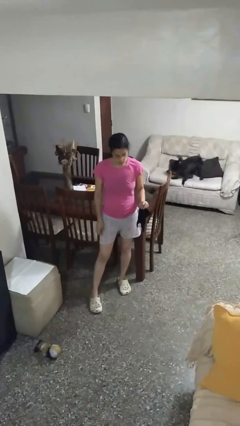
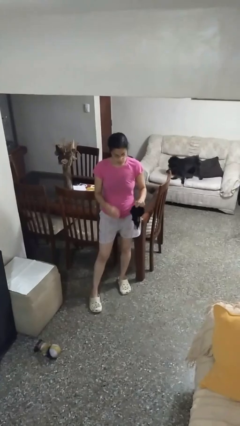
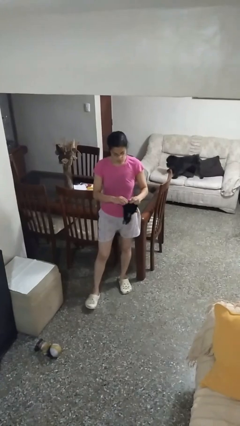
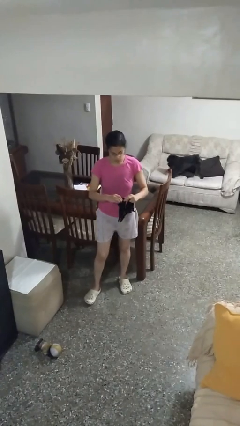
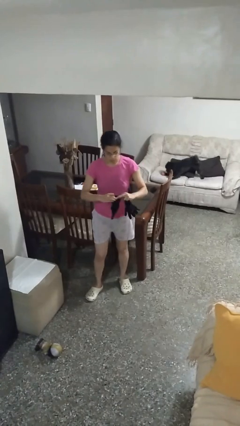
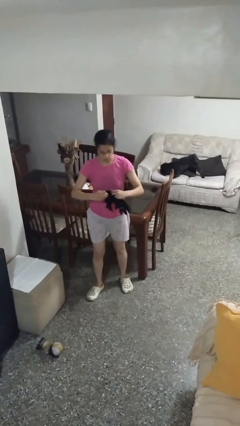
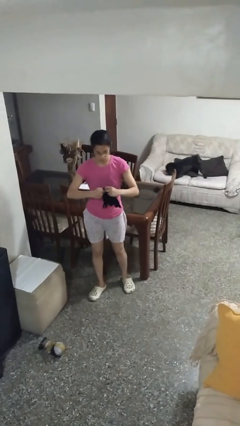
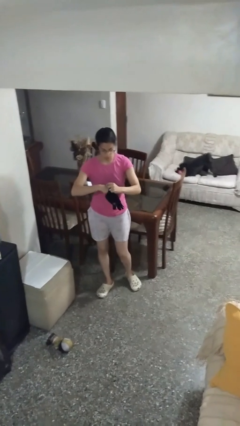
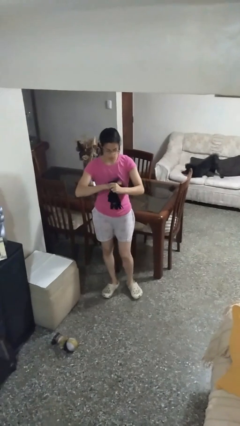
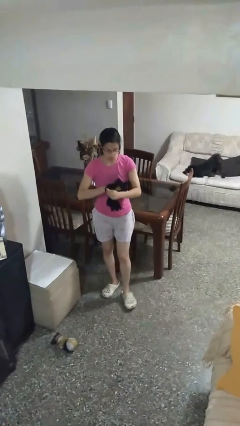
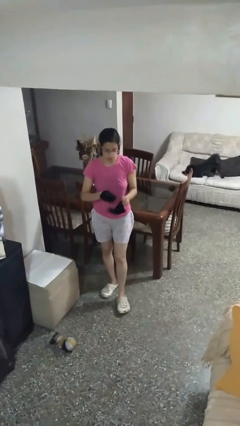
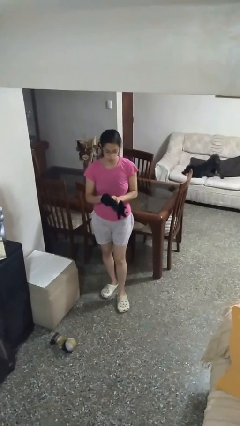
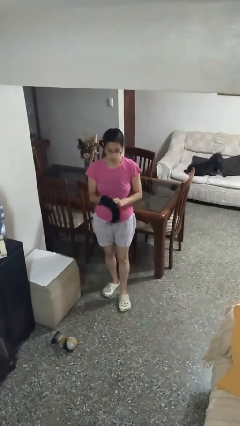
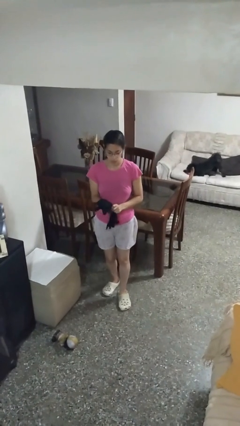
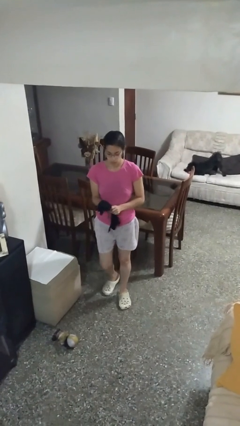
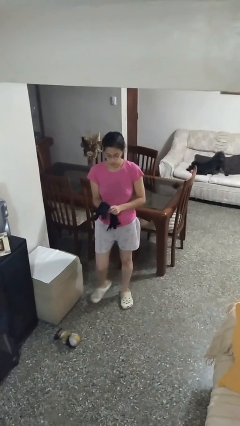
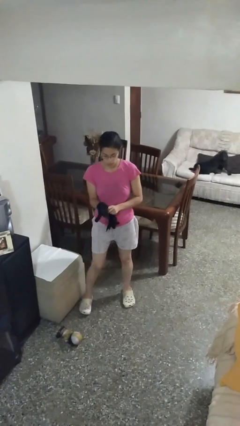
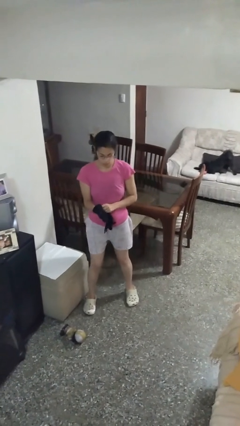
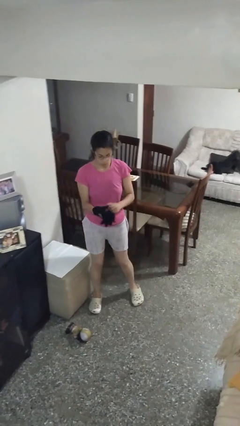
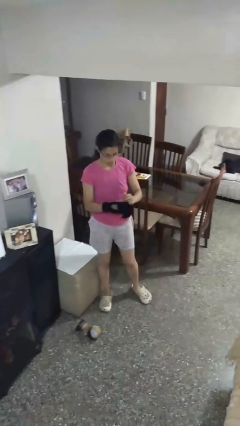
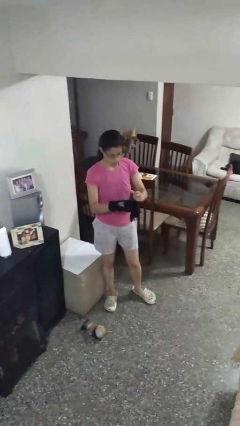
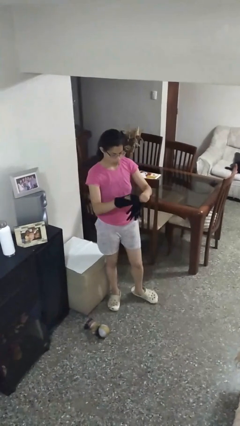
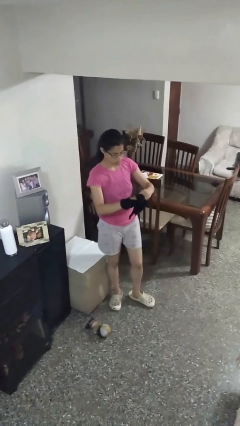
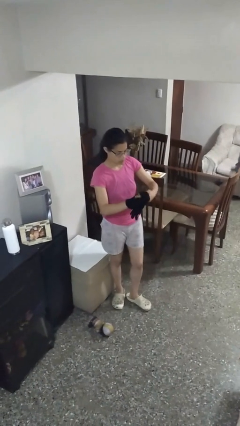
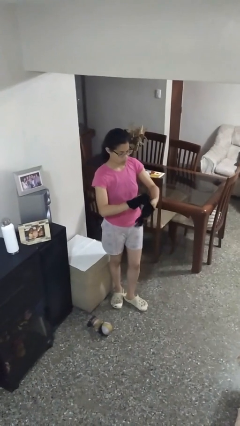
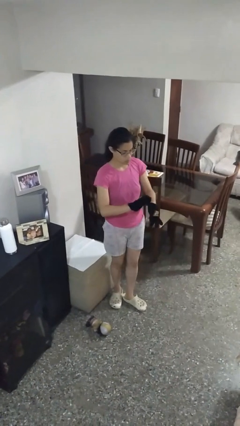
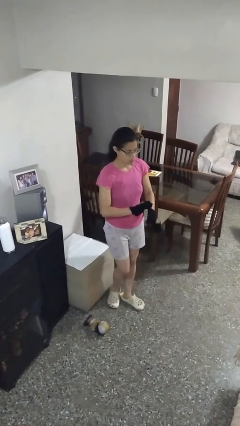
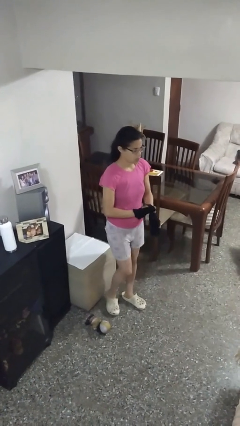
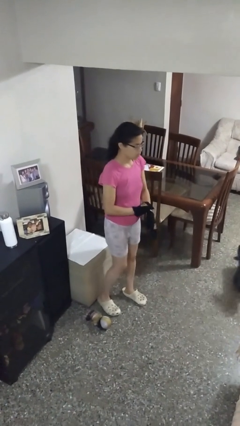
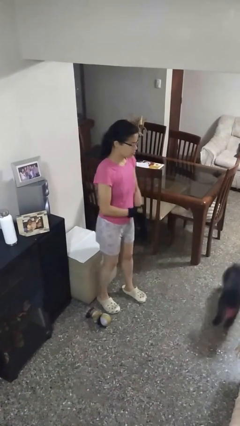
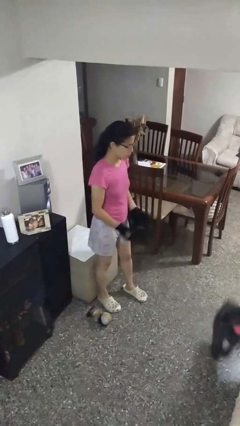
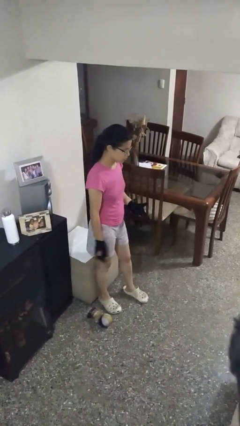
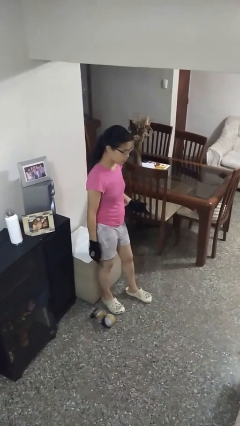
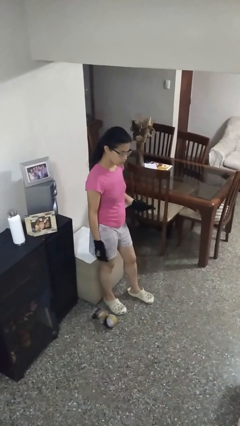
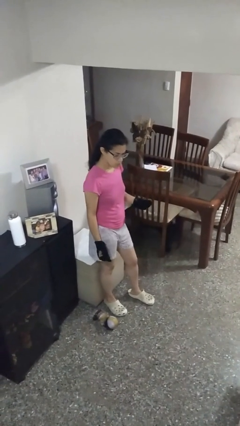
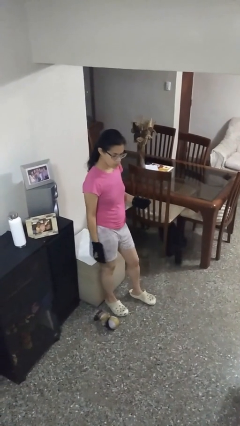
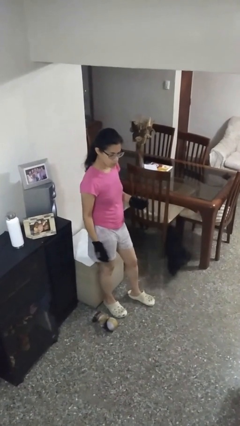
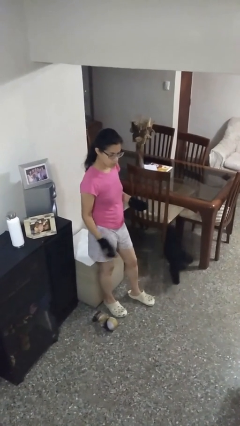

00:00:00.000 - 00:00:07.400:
person puts on gloves

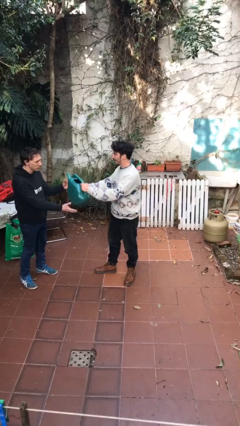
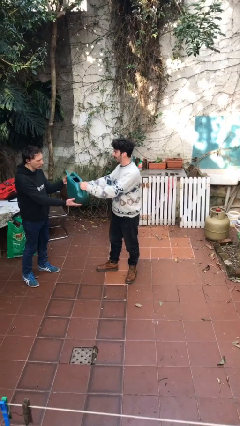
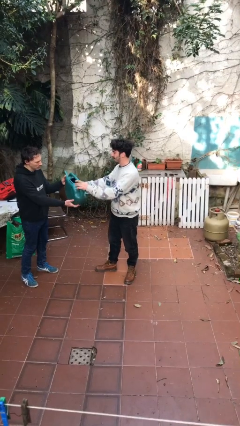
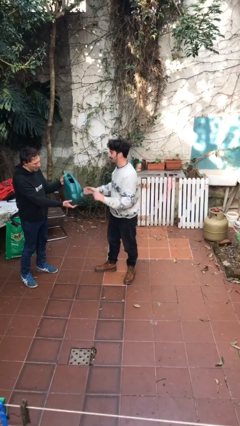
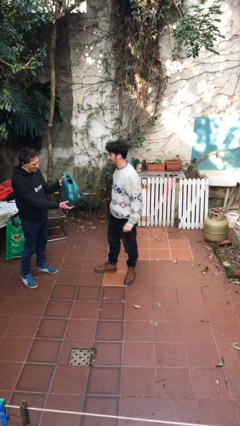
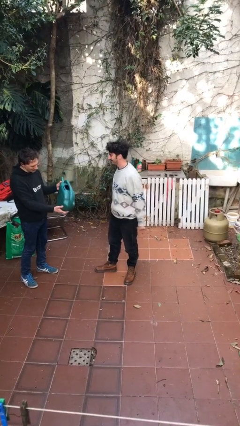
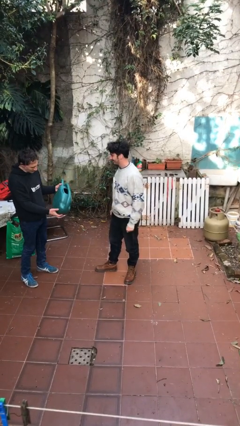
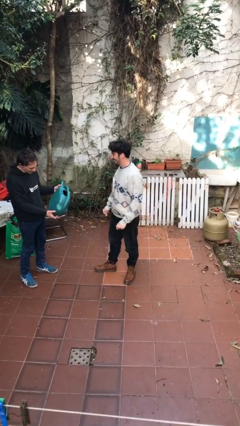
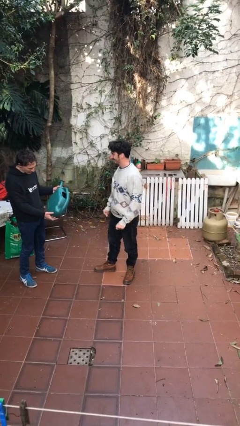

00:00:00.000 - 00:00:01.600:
person transfers object to person

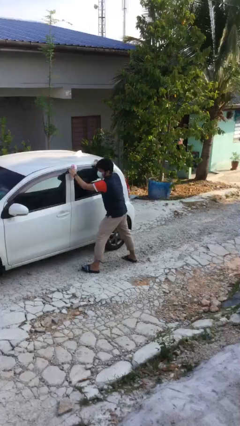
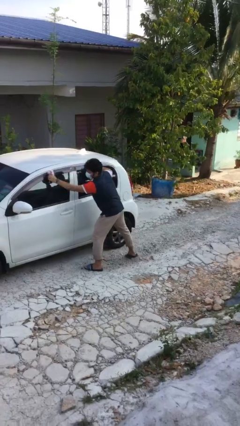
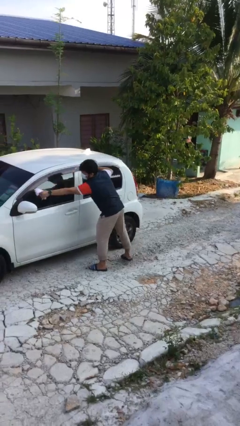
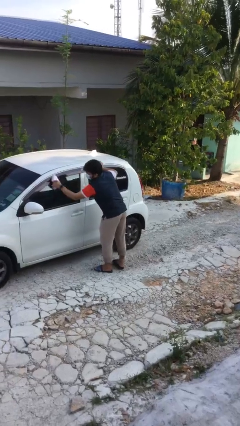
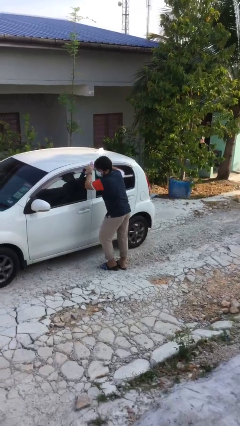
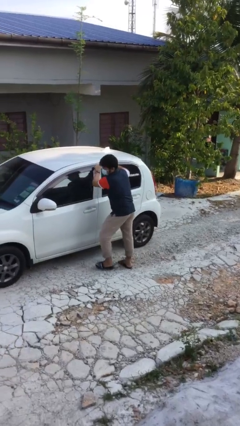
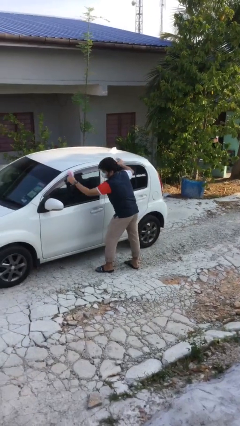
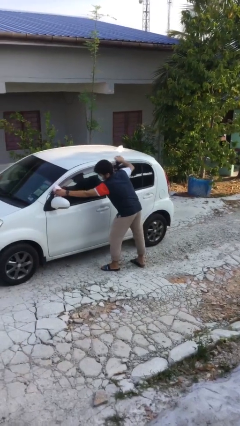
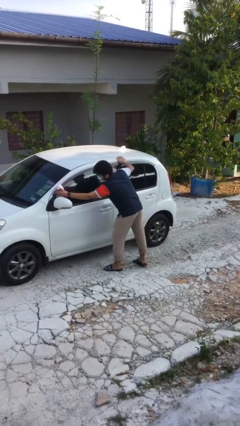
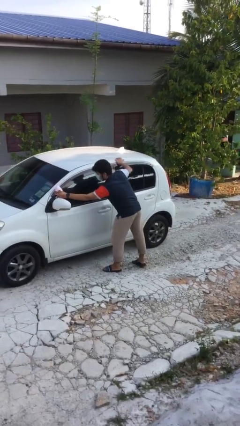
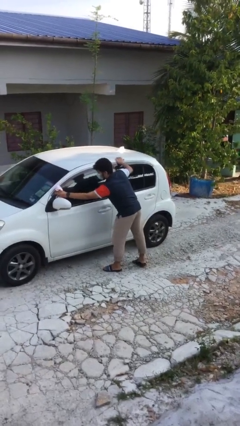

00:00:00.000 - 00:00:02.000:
person polishes car with rag

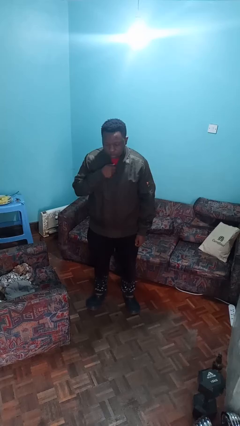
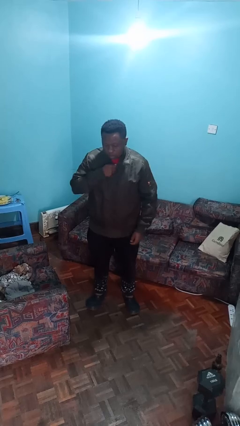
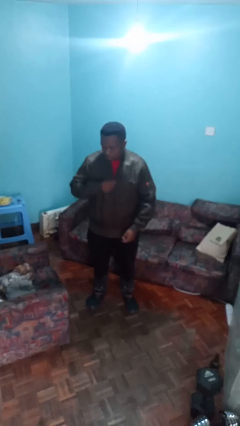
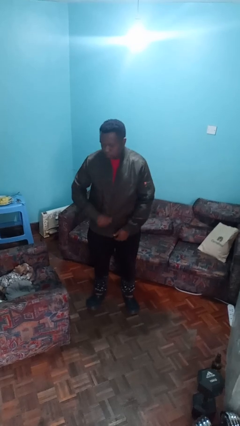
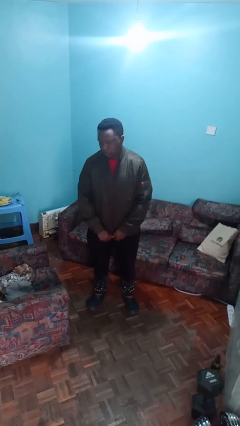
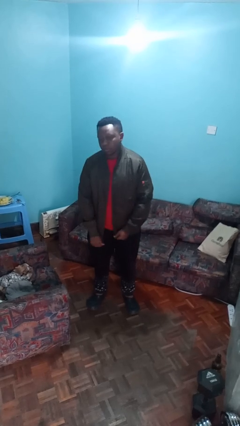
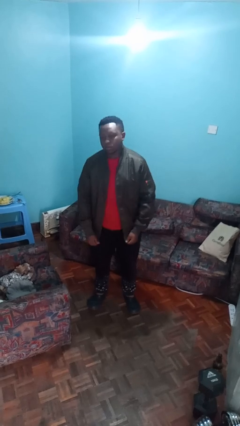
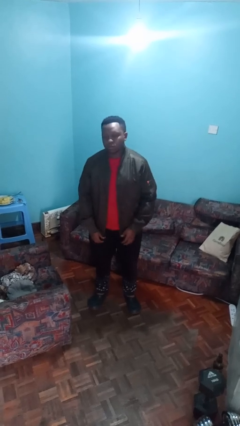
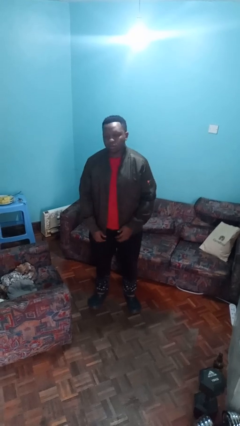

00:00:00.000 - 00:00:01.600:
person unzips jacket

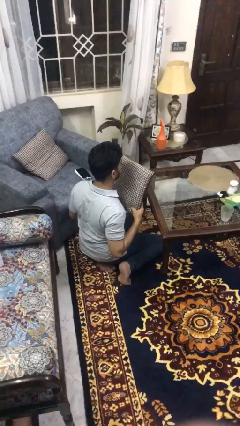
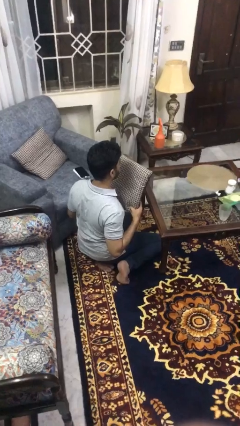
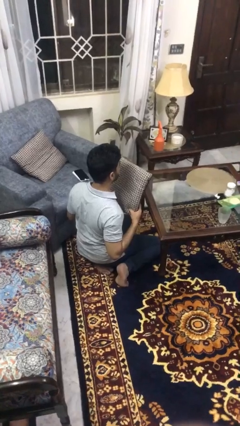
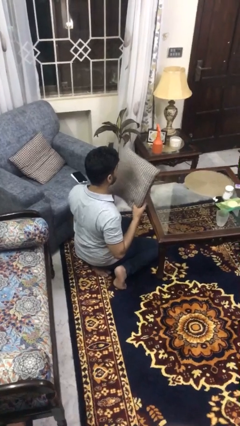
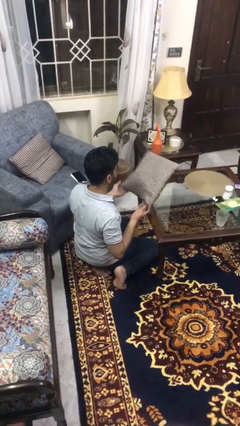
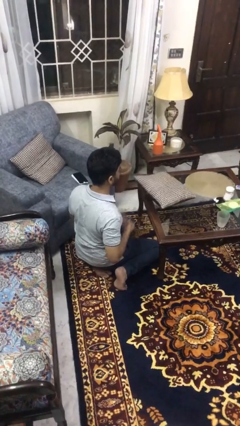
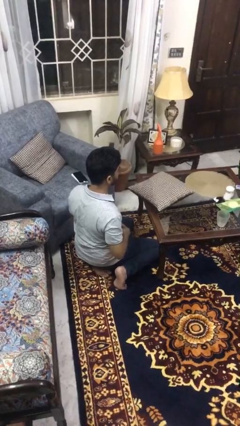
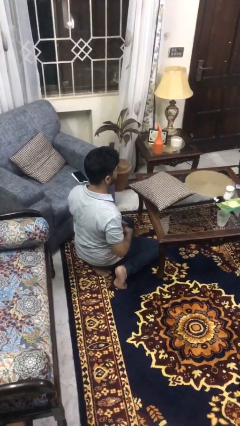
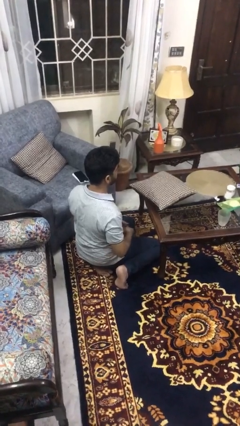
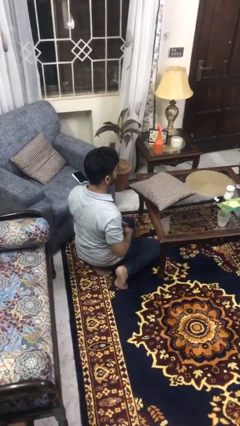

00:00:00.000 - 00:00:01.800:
person throws object on table

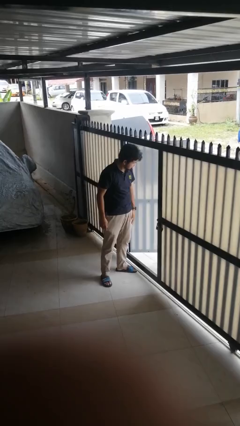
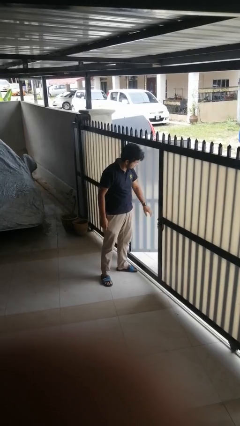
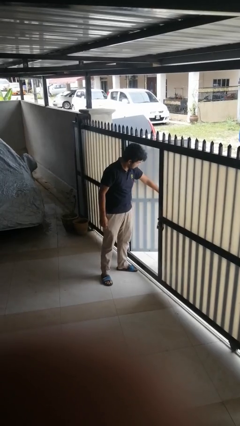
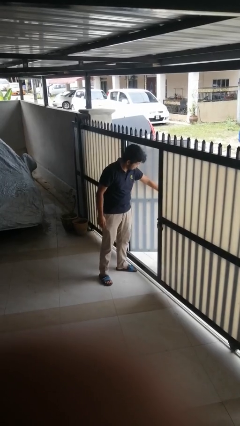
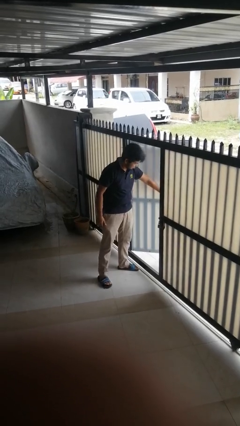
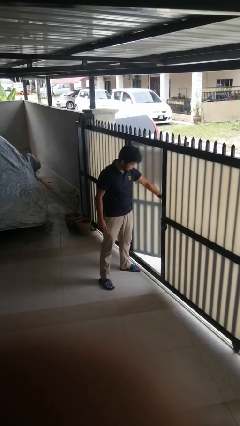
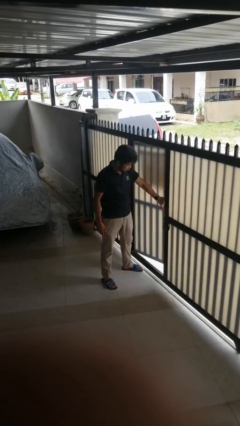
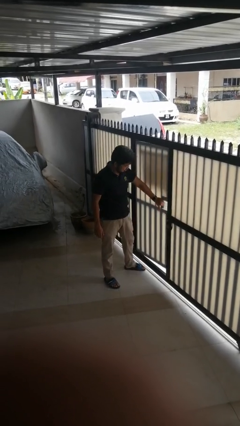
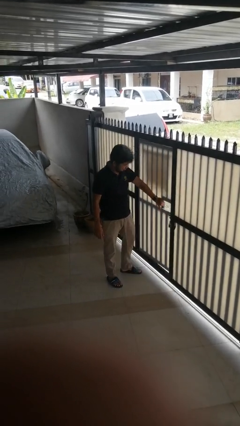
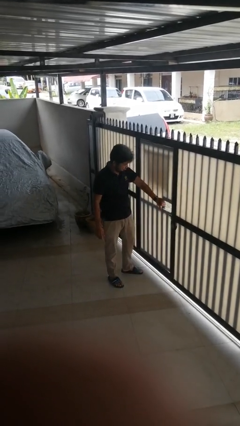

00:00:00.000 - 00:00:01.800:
person closes gate

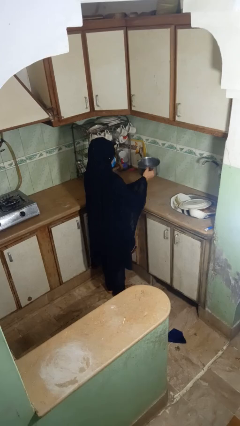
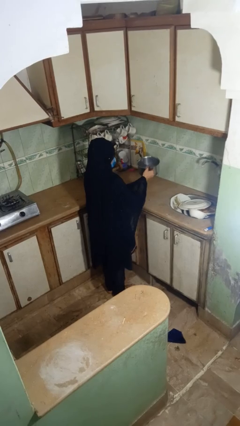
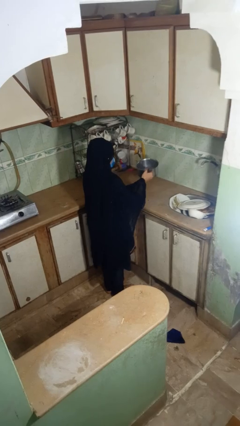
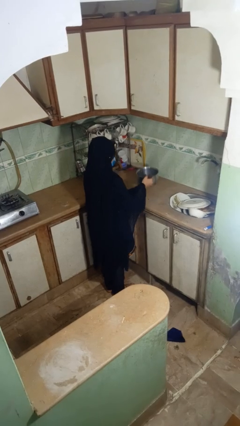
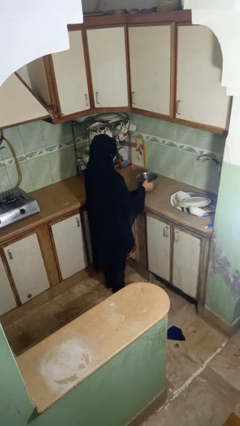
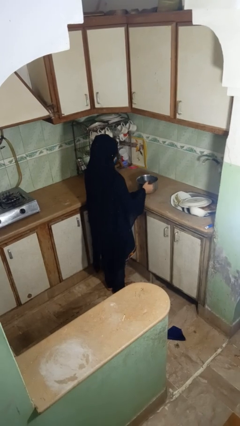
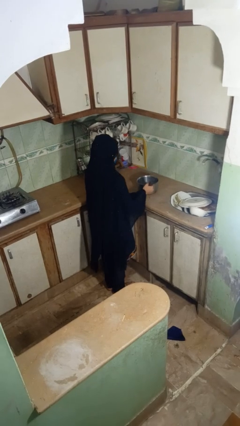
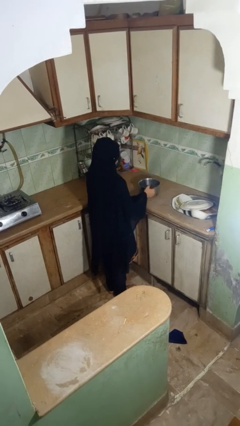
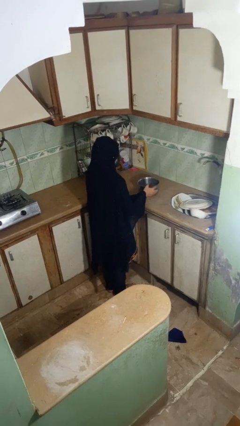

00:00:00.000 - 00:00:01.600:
person puts down object on countertop
